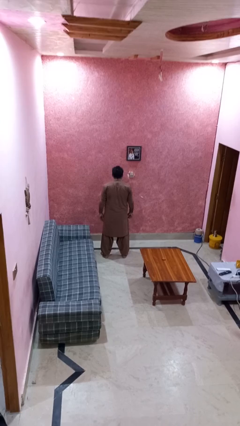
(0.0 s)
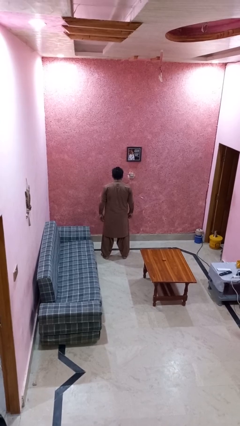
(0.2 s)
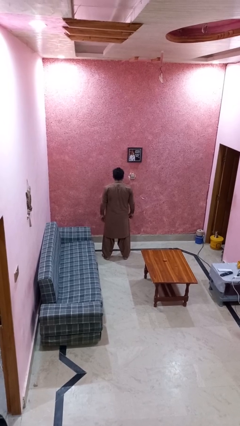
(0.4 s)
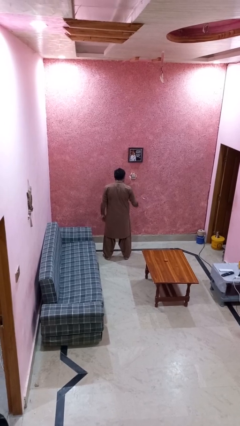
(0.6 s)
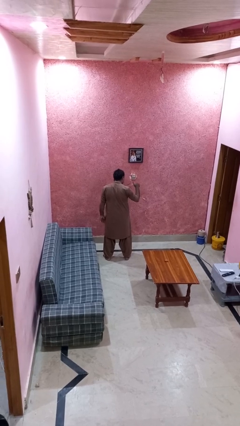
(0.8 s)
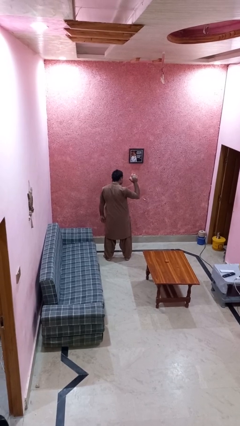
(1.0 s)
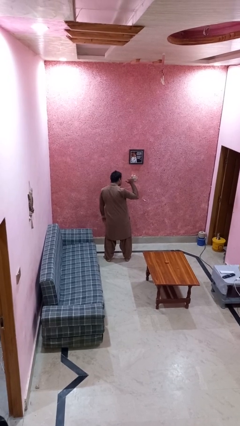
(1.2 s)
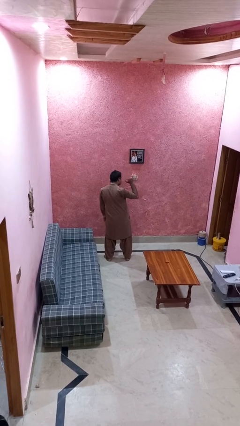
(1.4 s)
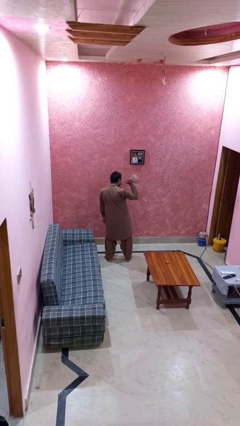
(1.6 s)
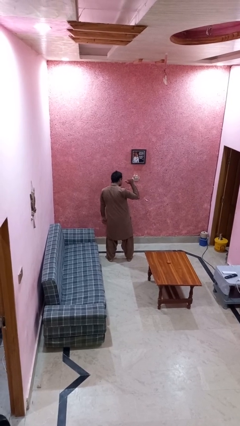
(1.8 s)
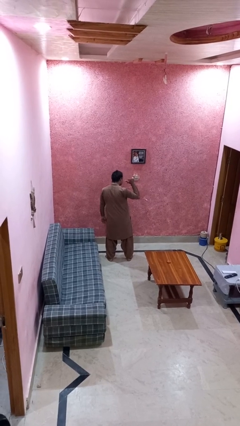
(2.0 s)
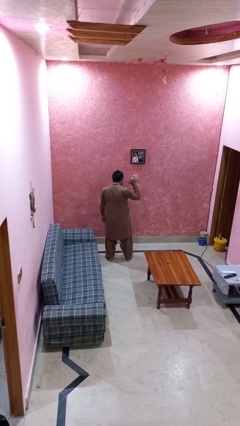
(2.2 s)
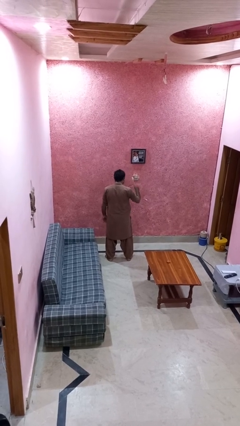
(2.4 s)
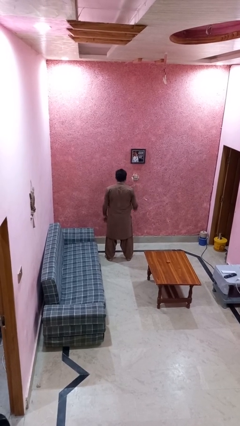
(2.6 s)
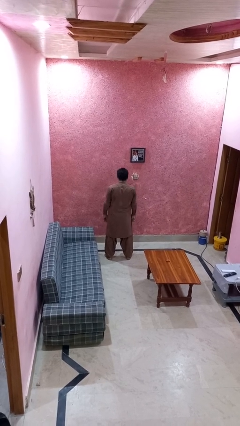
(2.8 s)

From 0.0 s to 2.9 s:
person gestures behind me

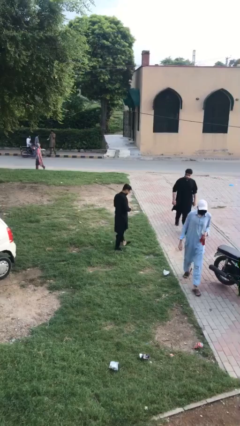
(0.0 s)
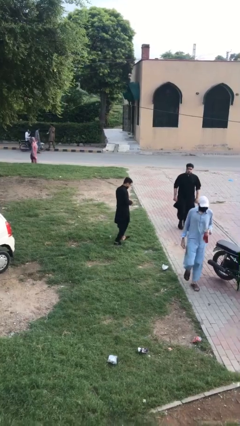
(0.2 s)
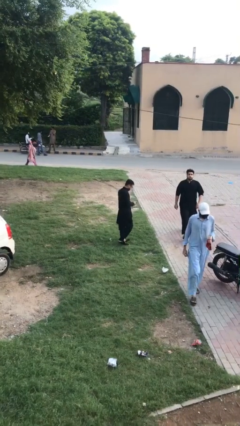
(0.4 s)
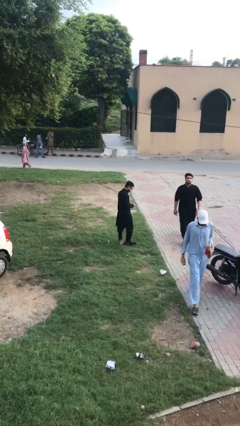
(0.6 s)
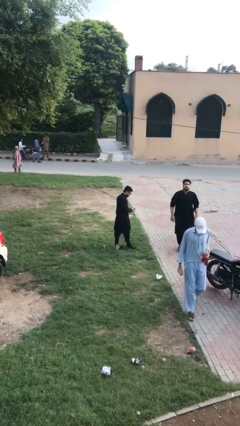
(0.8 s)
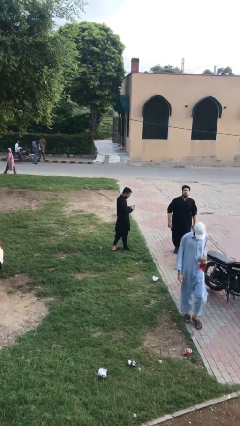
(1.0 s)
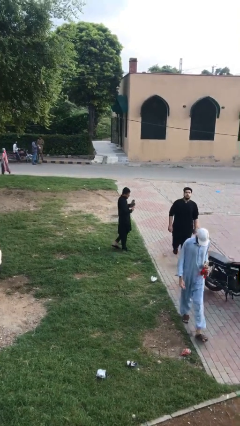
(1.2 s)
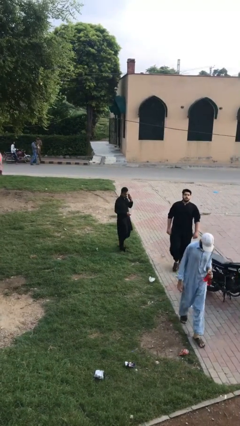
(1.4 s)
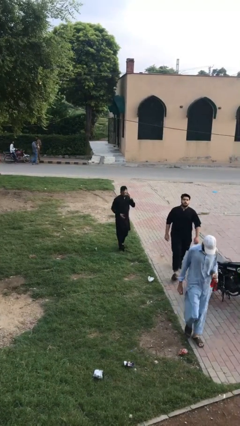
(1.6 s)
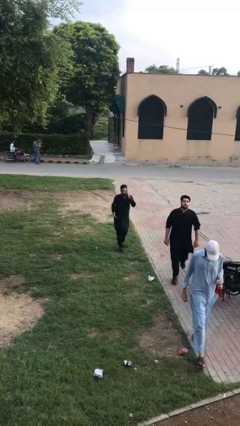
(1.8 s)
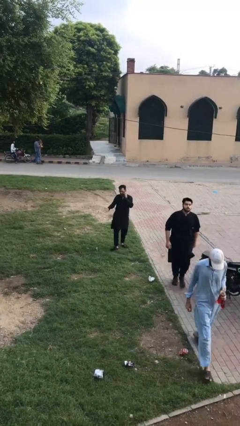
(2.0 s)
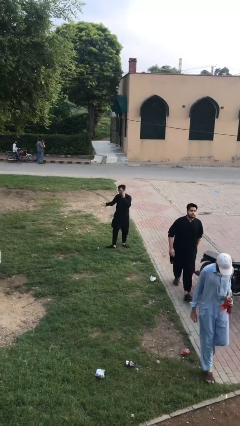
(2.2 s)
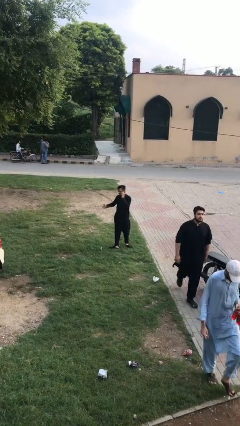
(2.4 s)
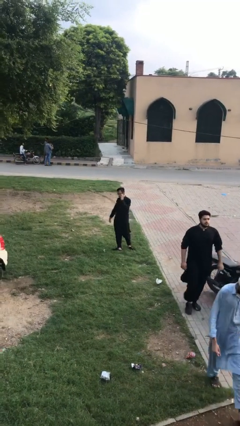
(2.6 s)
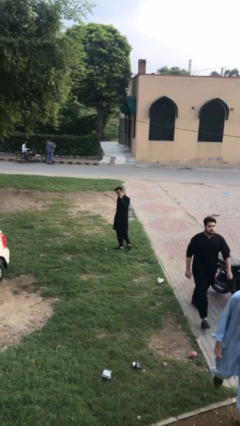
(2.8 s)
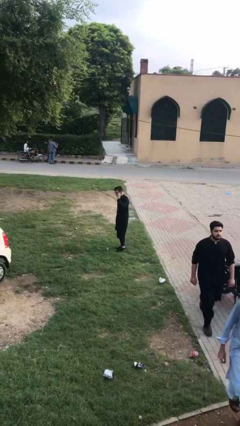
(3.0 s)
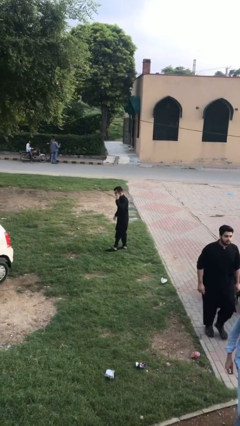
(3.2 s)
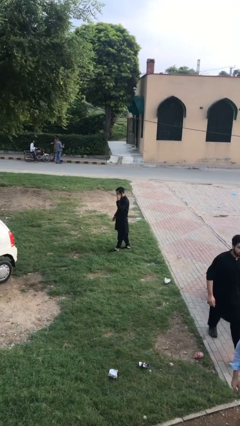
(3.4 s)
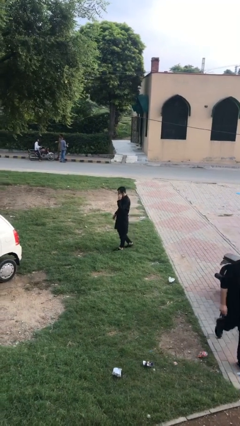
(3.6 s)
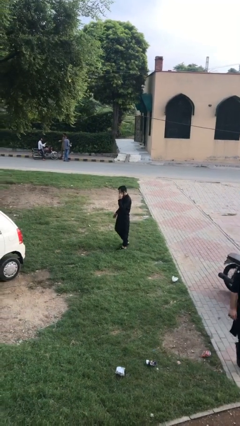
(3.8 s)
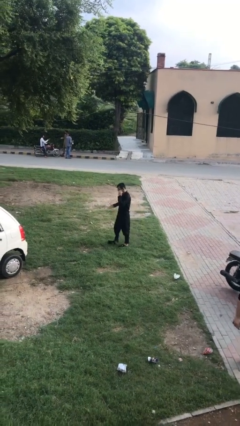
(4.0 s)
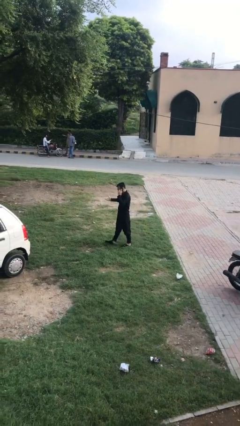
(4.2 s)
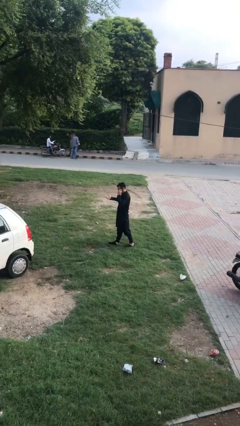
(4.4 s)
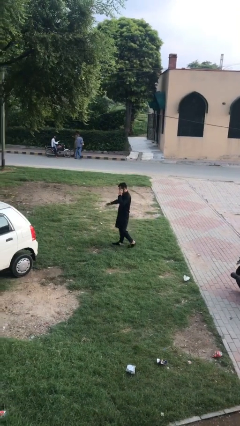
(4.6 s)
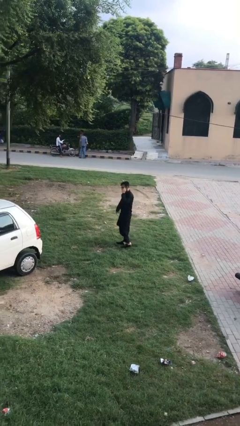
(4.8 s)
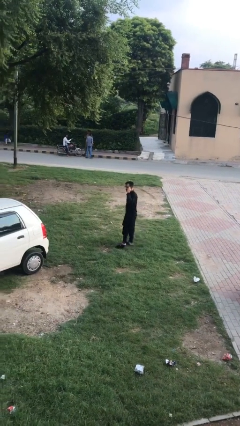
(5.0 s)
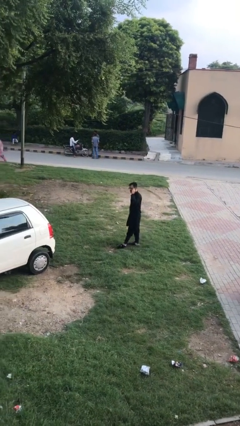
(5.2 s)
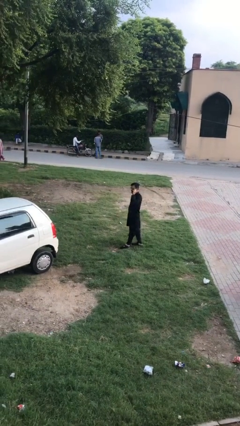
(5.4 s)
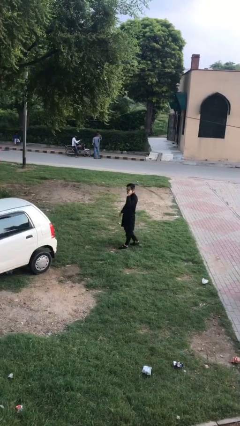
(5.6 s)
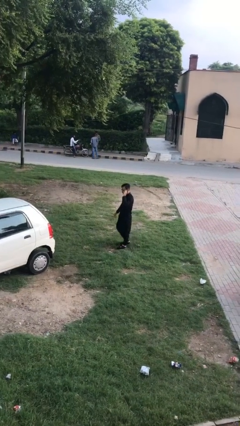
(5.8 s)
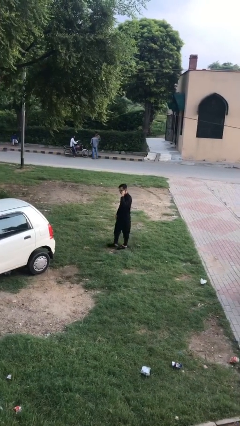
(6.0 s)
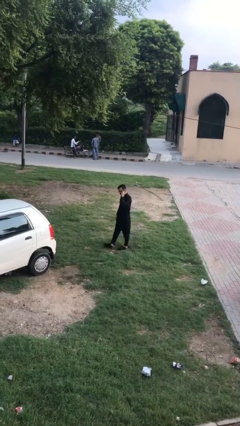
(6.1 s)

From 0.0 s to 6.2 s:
person talks on phone

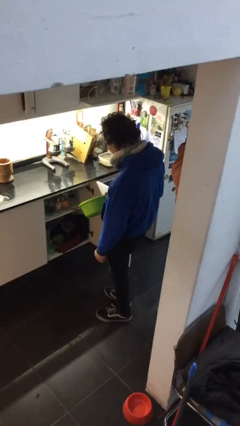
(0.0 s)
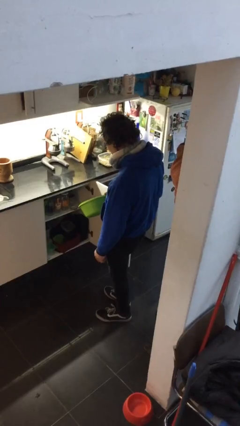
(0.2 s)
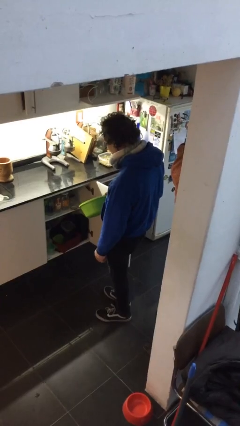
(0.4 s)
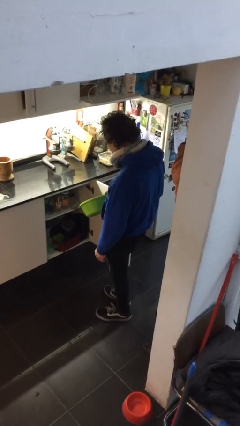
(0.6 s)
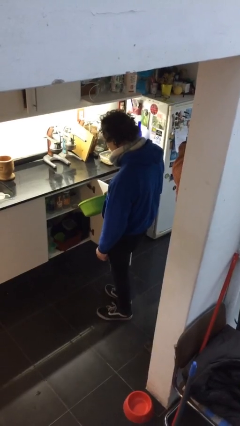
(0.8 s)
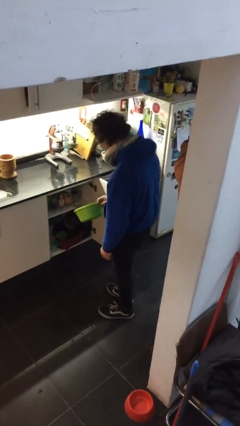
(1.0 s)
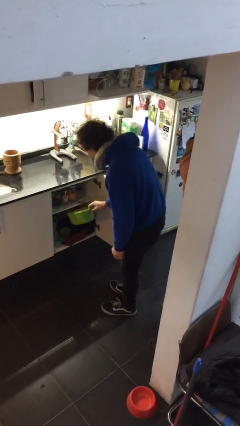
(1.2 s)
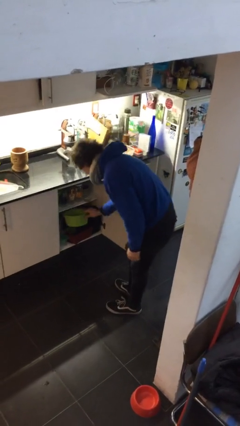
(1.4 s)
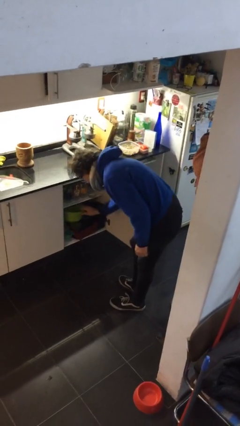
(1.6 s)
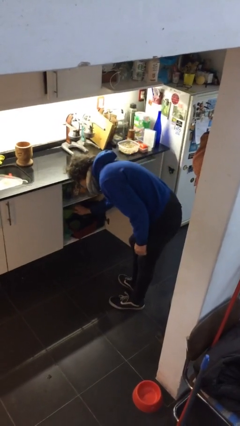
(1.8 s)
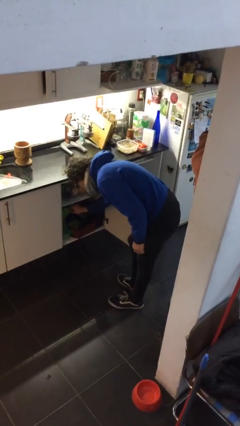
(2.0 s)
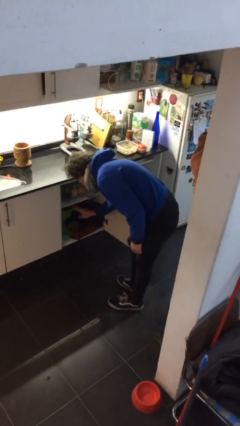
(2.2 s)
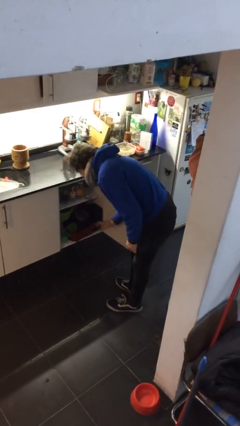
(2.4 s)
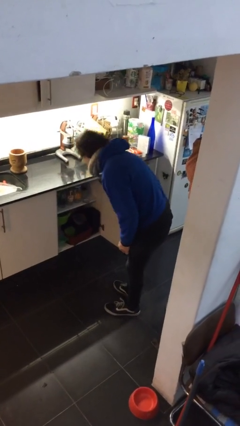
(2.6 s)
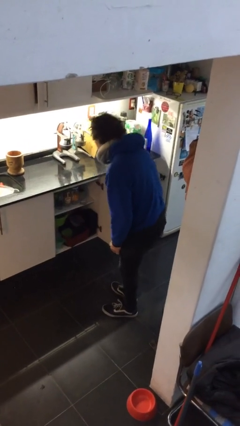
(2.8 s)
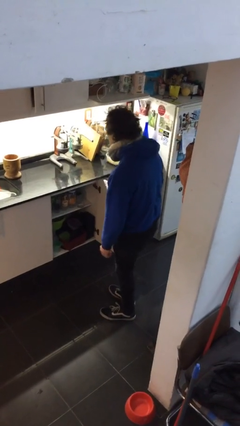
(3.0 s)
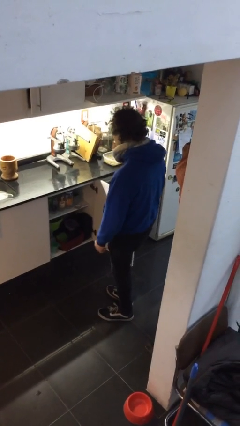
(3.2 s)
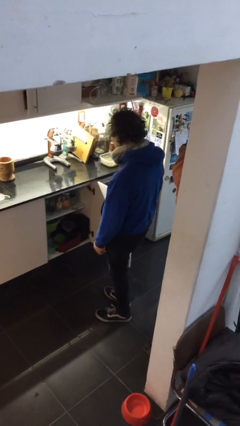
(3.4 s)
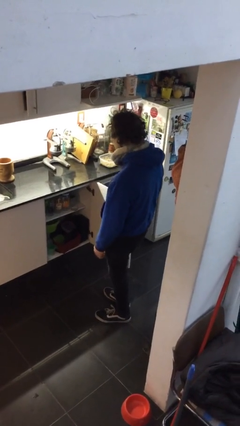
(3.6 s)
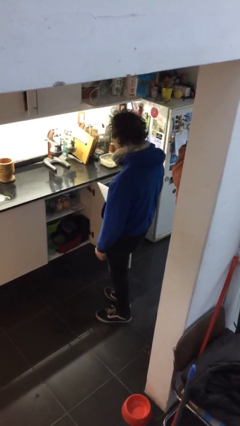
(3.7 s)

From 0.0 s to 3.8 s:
person puts down object into cabinet

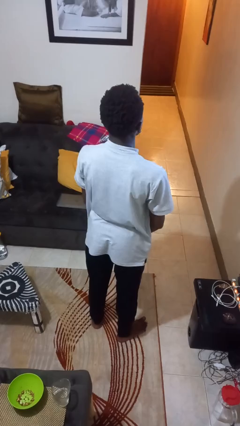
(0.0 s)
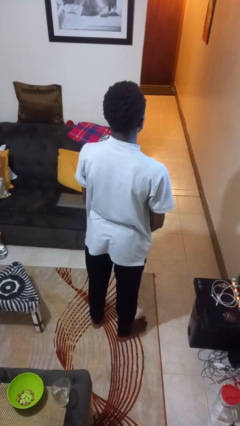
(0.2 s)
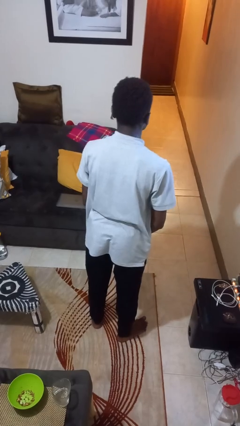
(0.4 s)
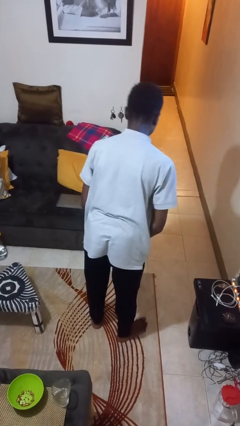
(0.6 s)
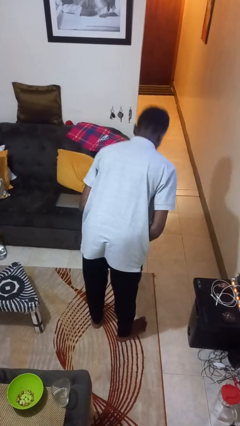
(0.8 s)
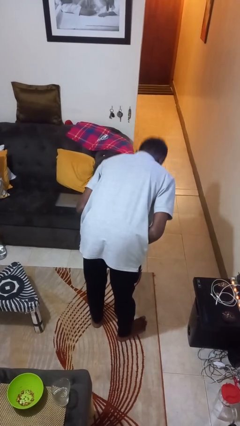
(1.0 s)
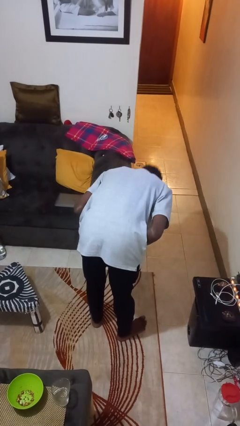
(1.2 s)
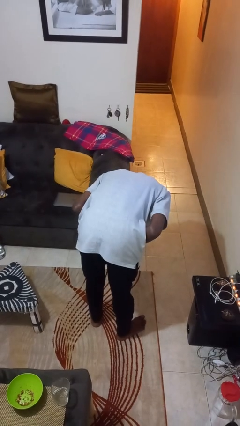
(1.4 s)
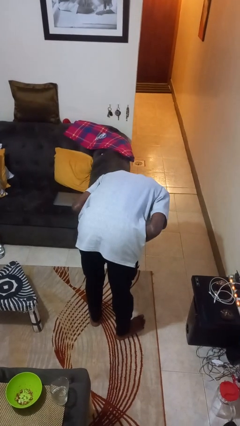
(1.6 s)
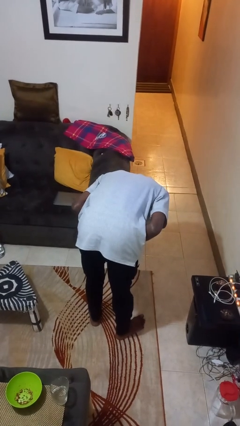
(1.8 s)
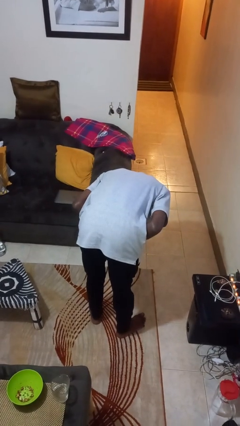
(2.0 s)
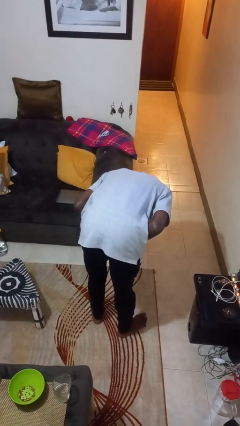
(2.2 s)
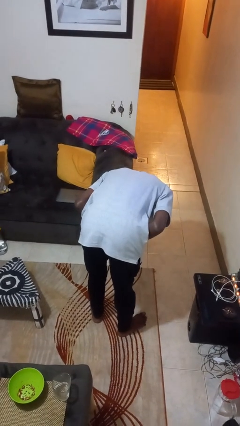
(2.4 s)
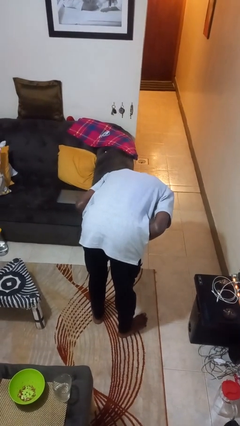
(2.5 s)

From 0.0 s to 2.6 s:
person bows

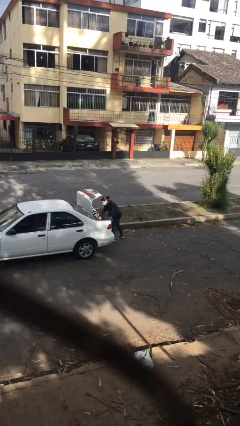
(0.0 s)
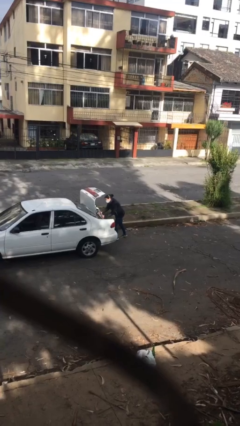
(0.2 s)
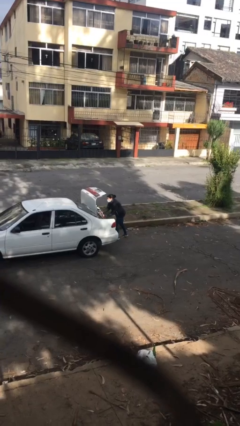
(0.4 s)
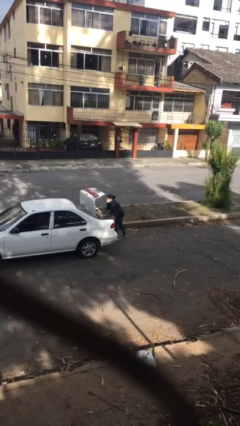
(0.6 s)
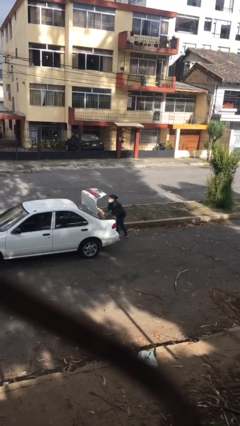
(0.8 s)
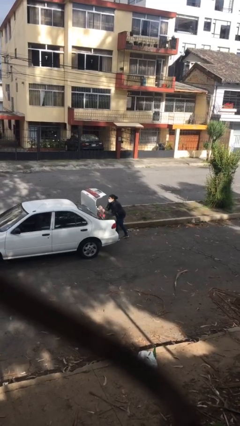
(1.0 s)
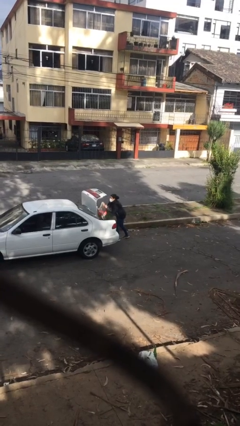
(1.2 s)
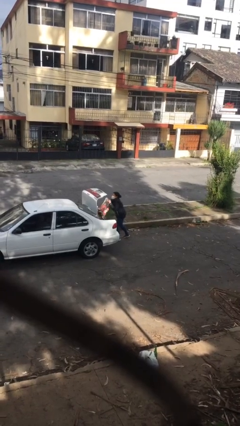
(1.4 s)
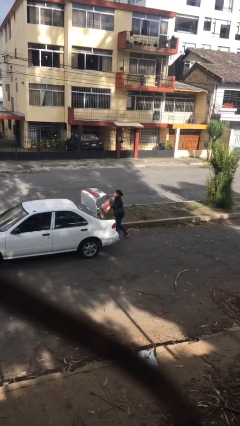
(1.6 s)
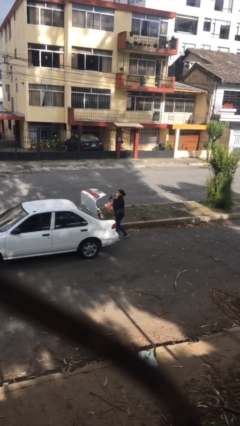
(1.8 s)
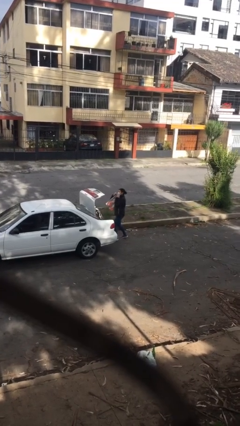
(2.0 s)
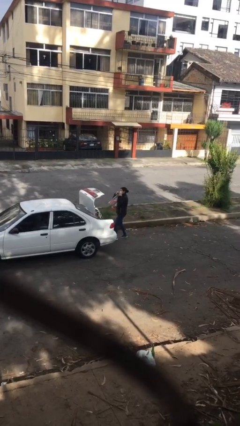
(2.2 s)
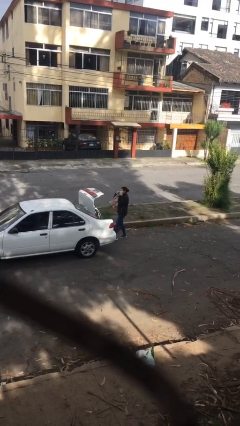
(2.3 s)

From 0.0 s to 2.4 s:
person unloads car
